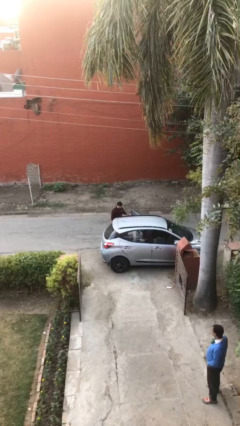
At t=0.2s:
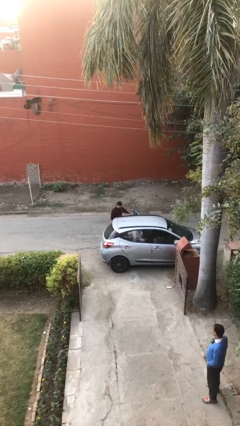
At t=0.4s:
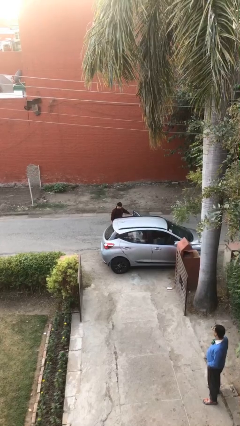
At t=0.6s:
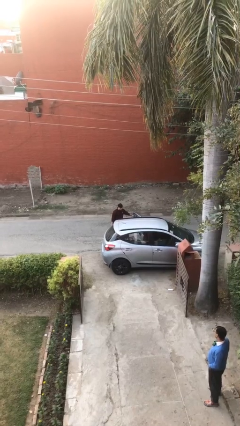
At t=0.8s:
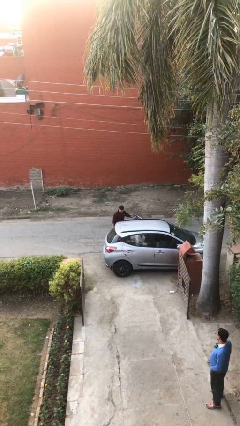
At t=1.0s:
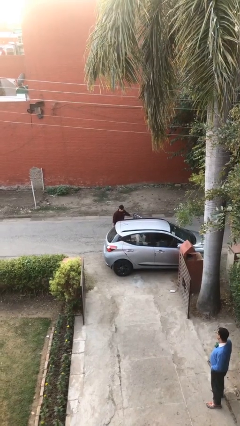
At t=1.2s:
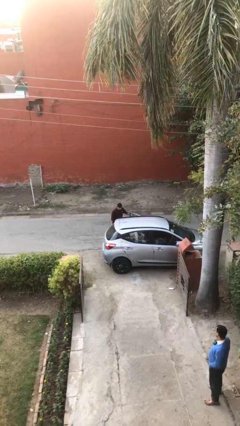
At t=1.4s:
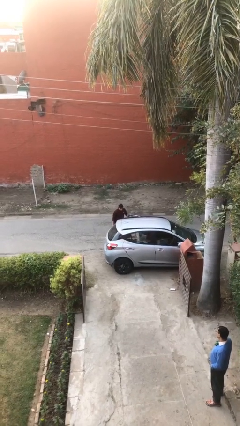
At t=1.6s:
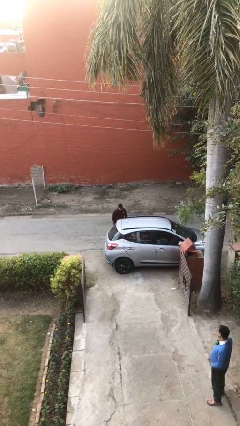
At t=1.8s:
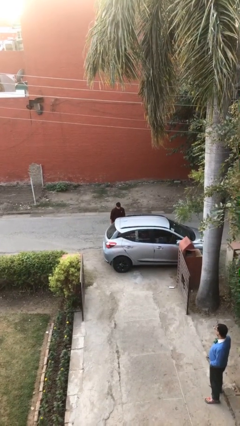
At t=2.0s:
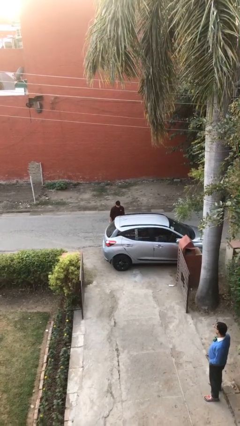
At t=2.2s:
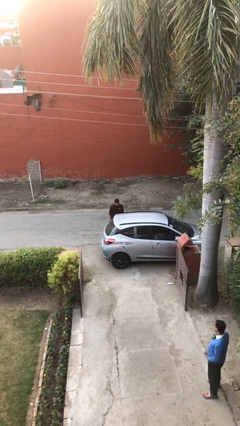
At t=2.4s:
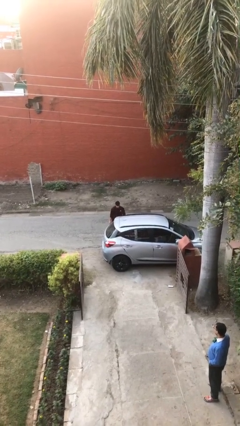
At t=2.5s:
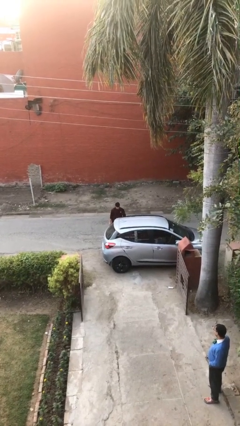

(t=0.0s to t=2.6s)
person closes car door

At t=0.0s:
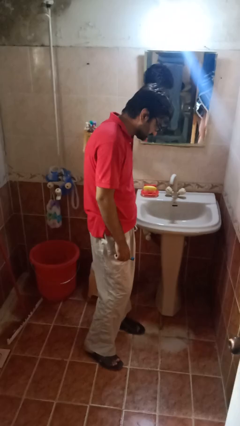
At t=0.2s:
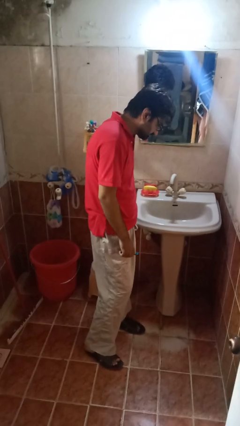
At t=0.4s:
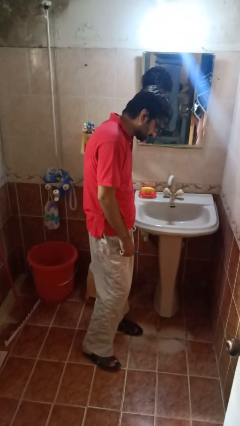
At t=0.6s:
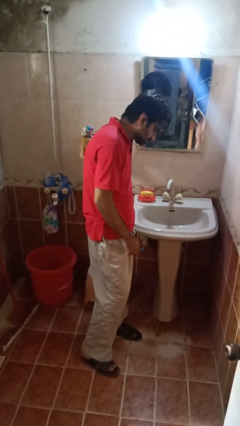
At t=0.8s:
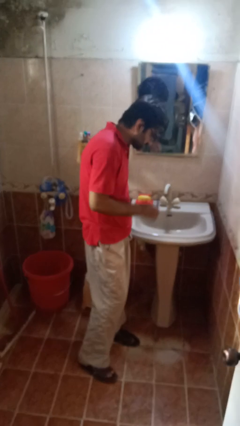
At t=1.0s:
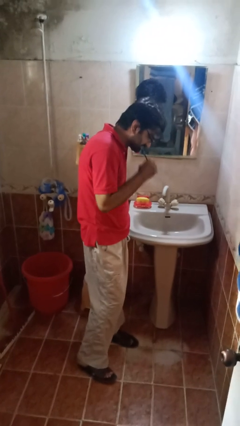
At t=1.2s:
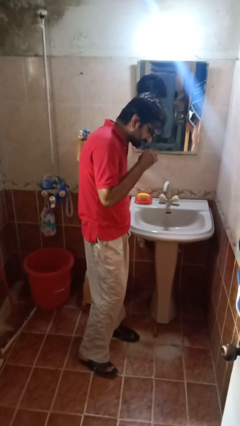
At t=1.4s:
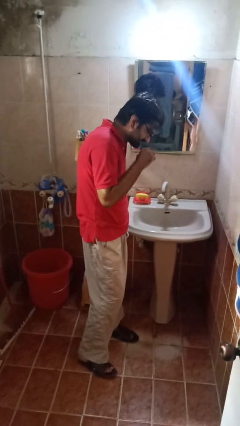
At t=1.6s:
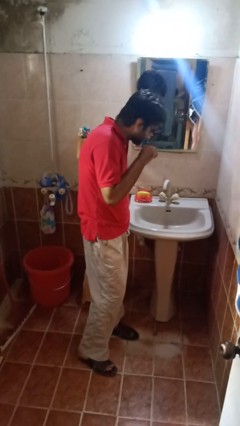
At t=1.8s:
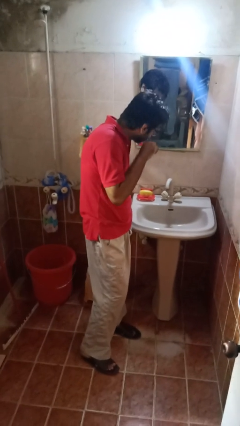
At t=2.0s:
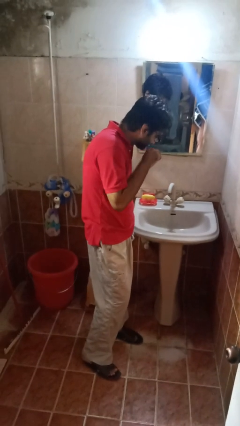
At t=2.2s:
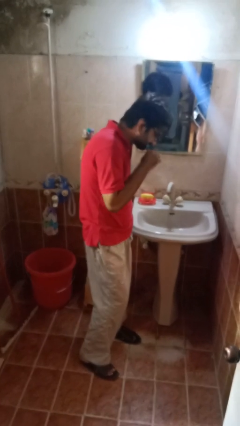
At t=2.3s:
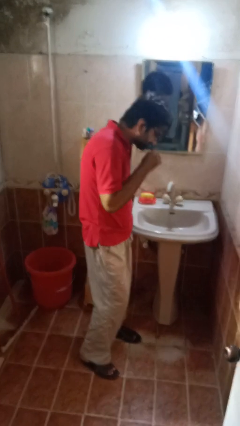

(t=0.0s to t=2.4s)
person brushes teeth

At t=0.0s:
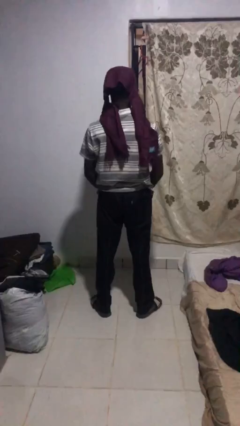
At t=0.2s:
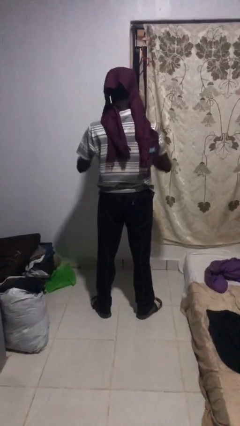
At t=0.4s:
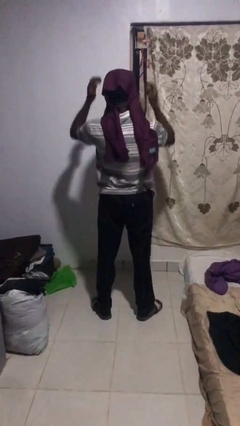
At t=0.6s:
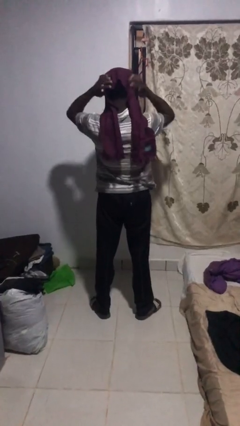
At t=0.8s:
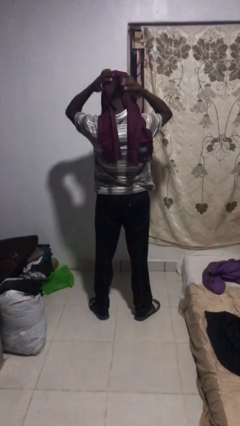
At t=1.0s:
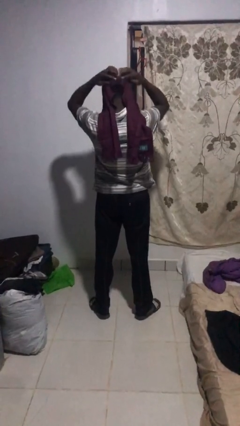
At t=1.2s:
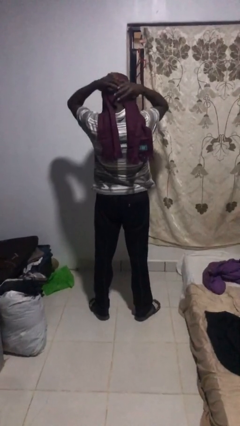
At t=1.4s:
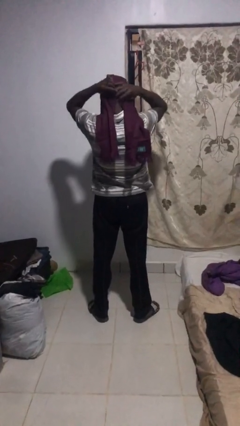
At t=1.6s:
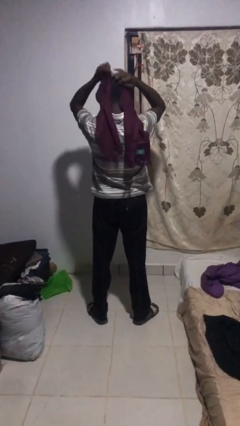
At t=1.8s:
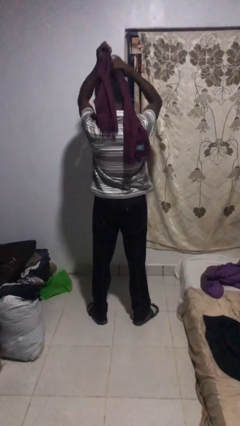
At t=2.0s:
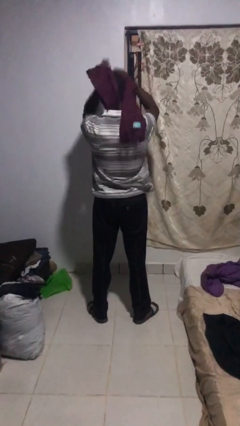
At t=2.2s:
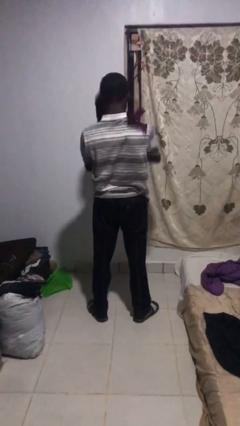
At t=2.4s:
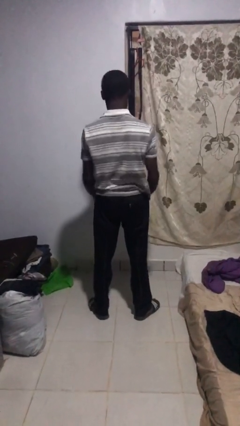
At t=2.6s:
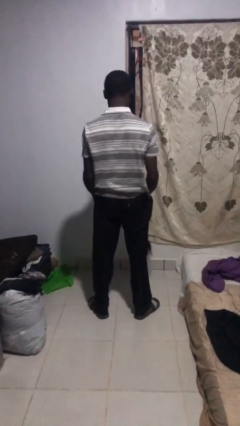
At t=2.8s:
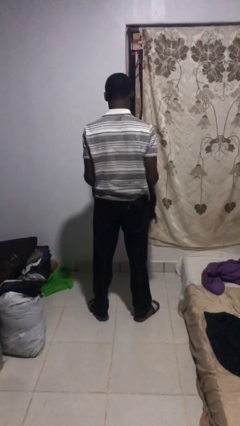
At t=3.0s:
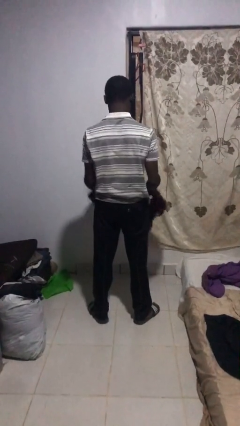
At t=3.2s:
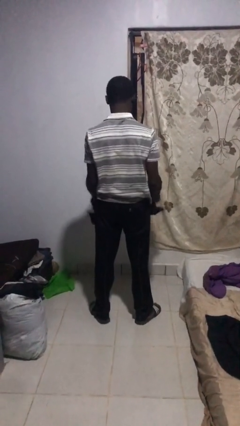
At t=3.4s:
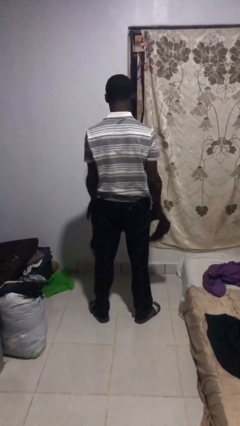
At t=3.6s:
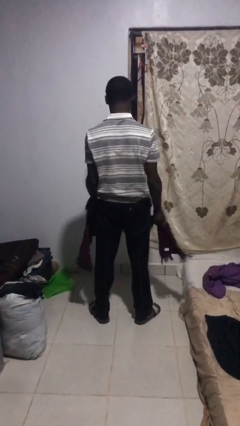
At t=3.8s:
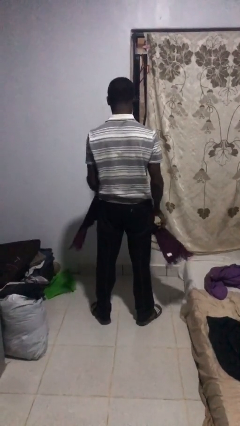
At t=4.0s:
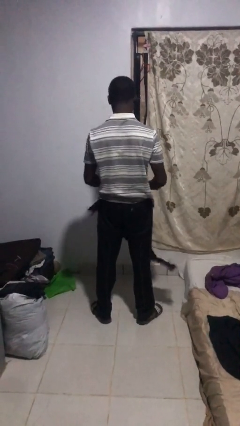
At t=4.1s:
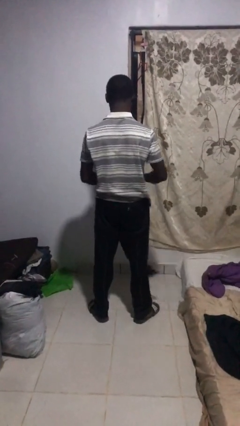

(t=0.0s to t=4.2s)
person takes off scarf

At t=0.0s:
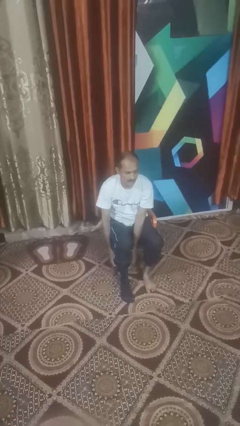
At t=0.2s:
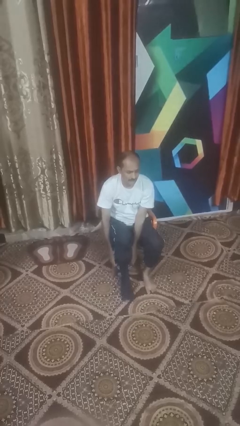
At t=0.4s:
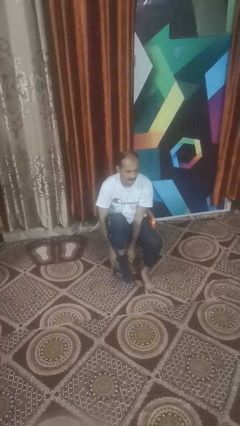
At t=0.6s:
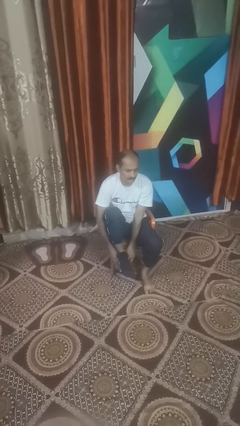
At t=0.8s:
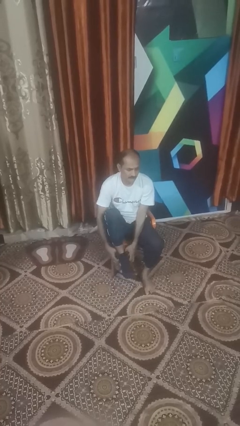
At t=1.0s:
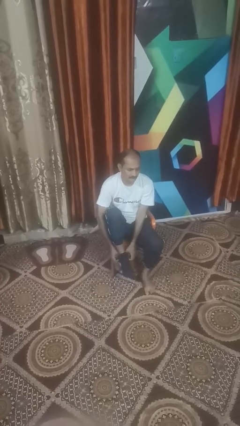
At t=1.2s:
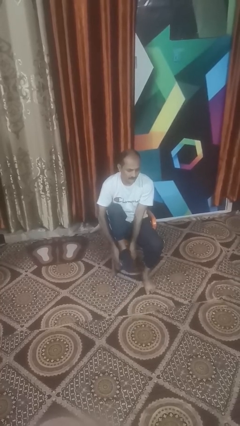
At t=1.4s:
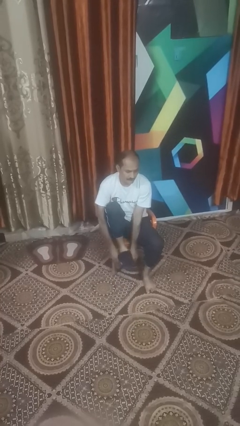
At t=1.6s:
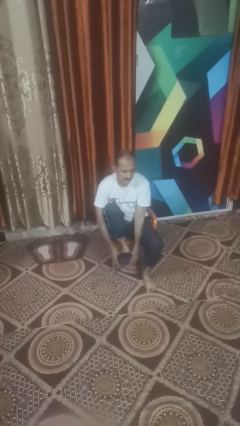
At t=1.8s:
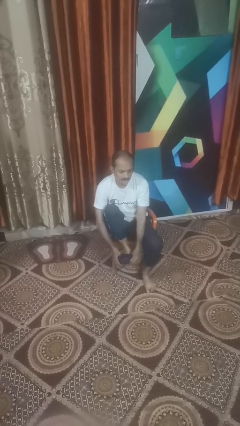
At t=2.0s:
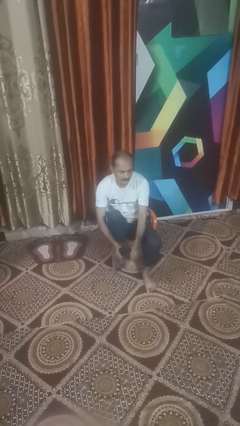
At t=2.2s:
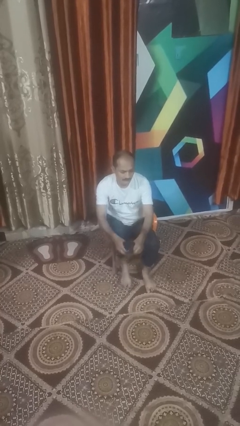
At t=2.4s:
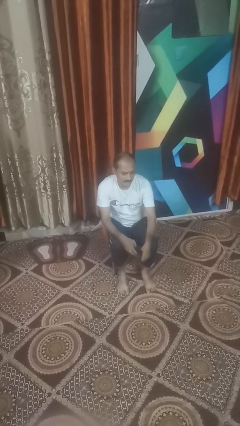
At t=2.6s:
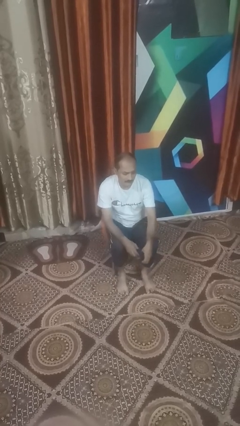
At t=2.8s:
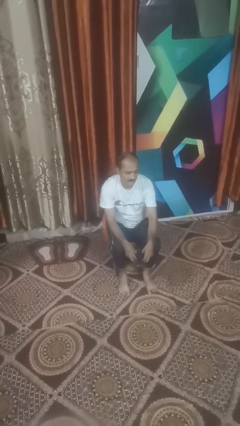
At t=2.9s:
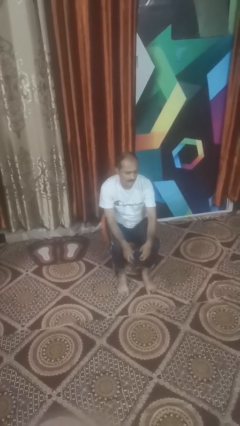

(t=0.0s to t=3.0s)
person takes off socks

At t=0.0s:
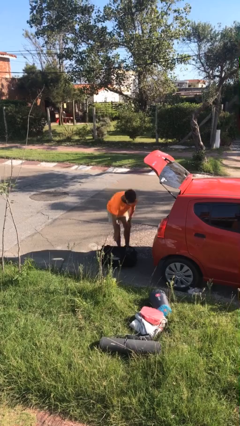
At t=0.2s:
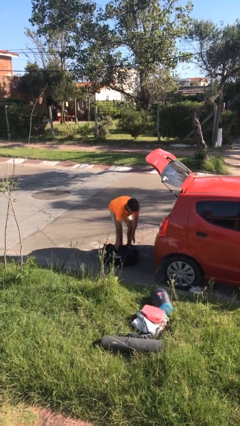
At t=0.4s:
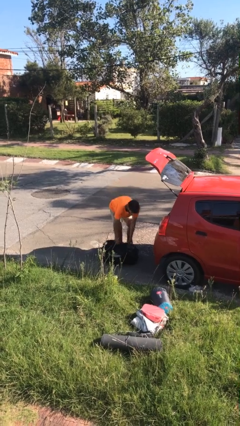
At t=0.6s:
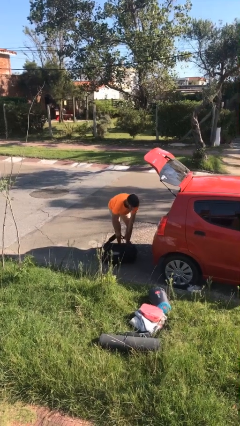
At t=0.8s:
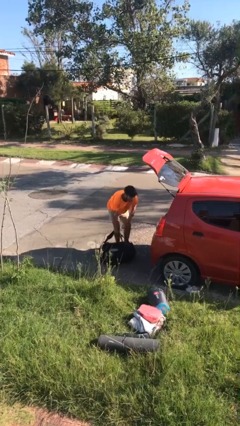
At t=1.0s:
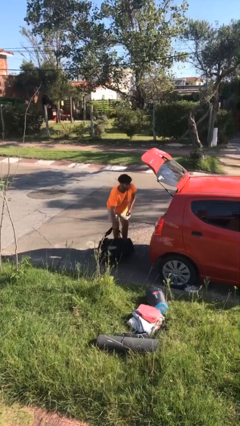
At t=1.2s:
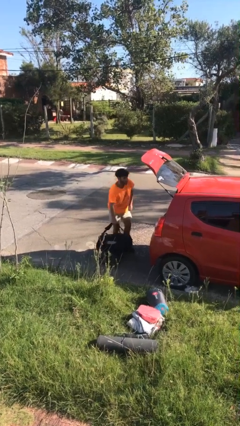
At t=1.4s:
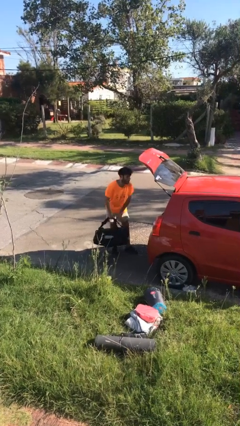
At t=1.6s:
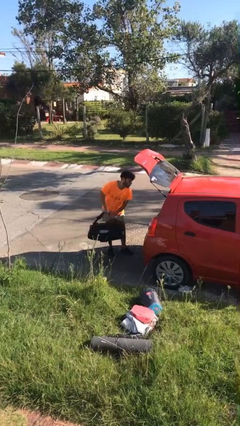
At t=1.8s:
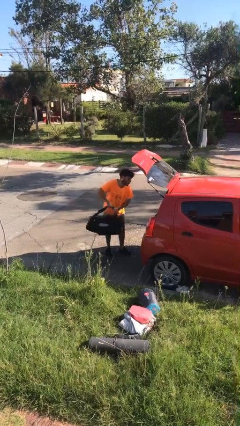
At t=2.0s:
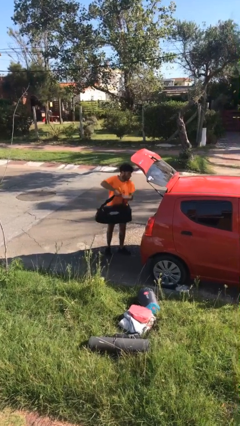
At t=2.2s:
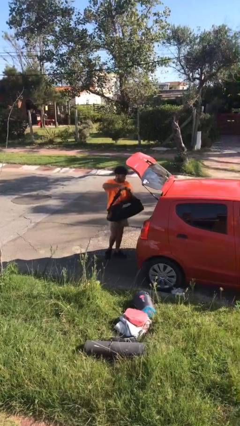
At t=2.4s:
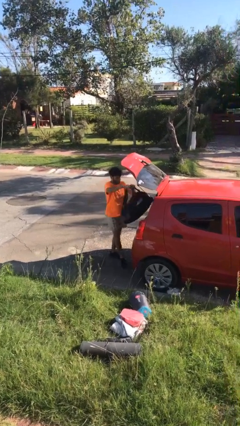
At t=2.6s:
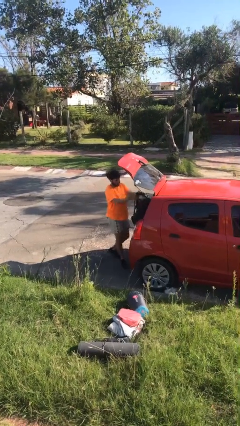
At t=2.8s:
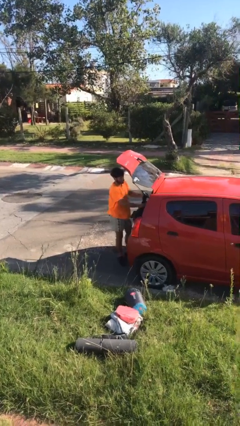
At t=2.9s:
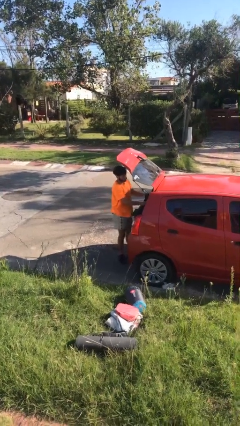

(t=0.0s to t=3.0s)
person loads car

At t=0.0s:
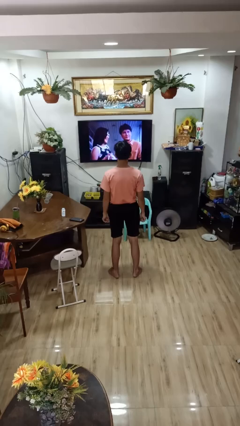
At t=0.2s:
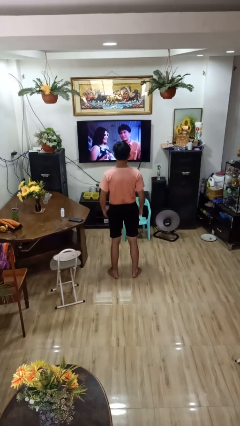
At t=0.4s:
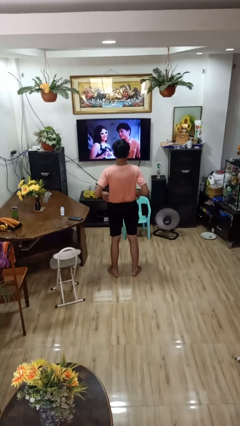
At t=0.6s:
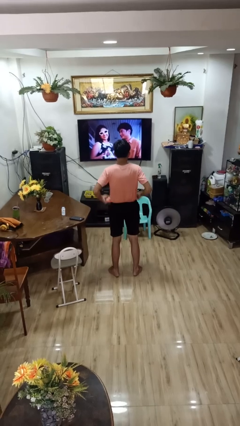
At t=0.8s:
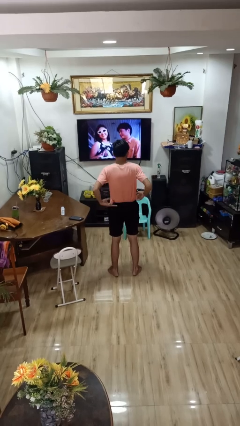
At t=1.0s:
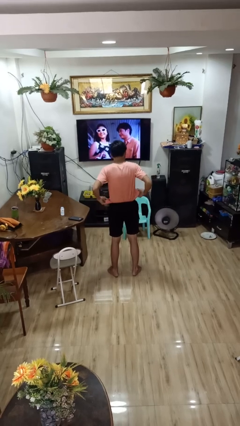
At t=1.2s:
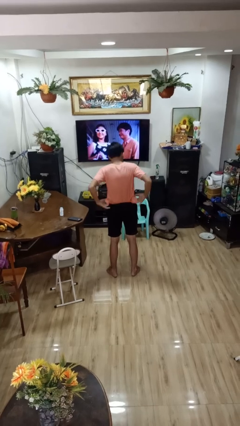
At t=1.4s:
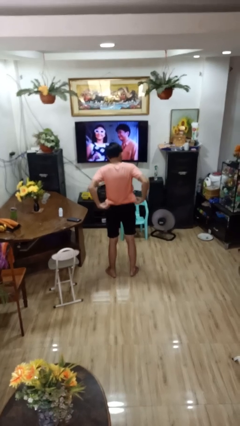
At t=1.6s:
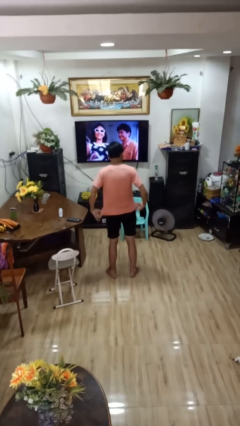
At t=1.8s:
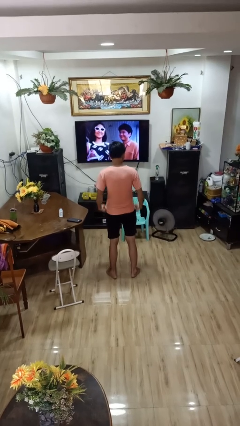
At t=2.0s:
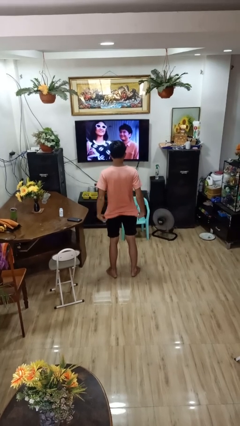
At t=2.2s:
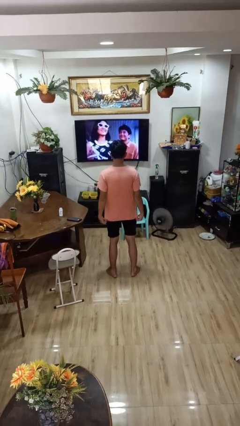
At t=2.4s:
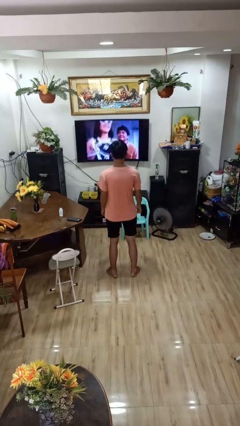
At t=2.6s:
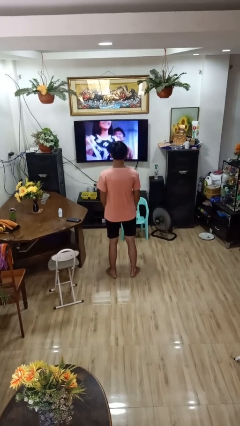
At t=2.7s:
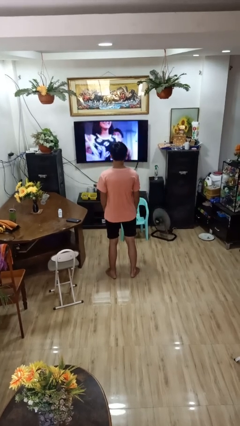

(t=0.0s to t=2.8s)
person untucks shirt
